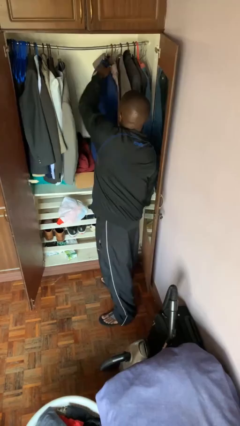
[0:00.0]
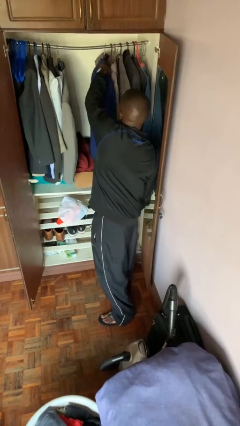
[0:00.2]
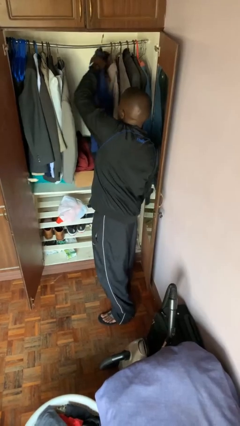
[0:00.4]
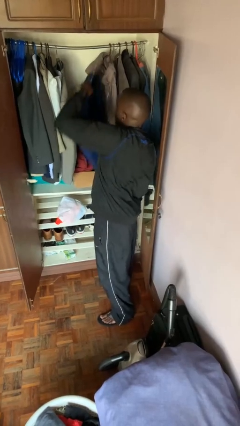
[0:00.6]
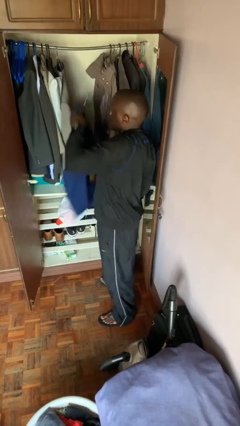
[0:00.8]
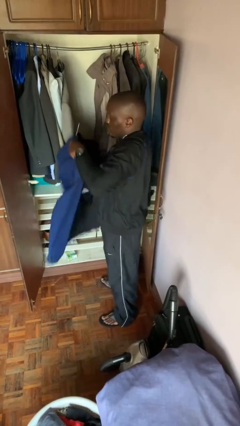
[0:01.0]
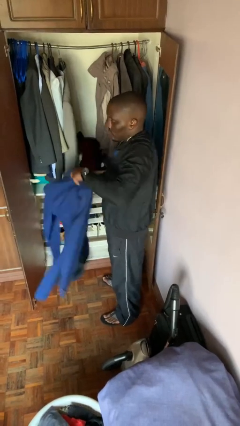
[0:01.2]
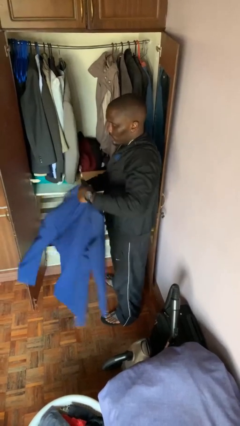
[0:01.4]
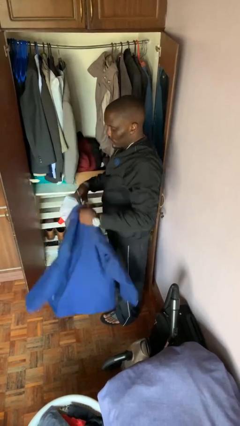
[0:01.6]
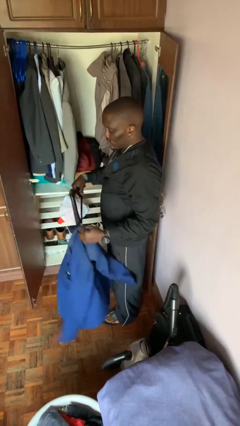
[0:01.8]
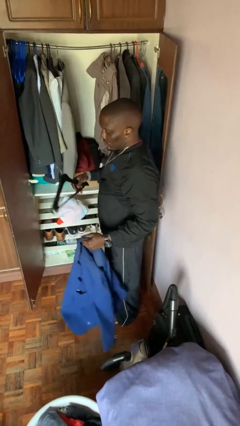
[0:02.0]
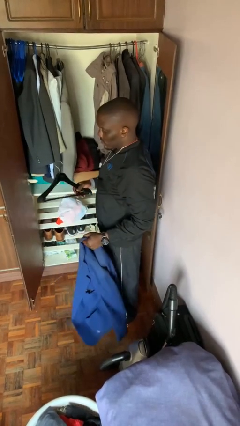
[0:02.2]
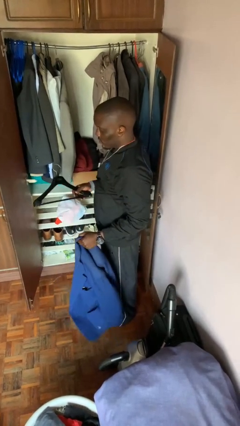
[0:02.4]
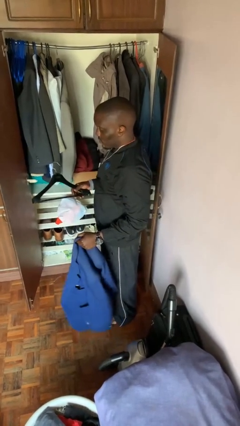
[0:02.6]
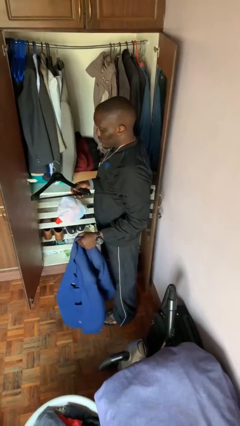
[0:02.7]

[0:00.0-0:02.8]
person takes clothes from closet

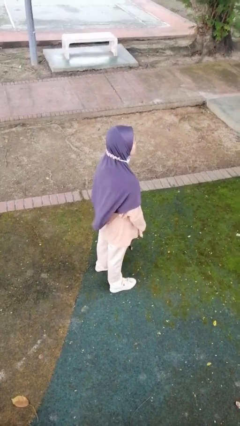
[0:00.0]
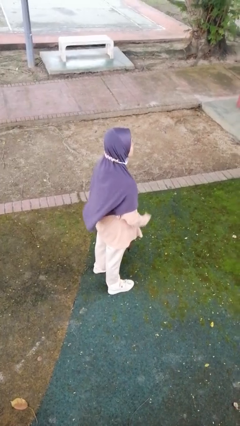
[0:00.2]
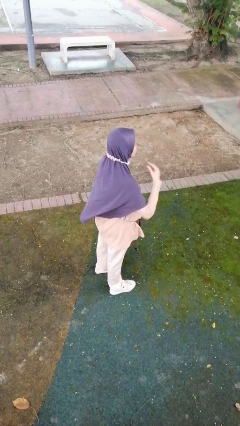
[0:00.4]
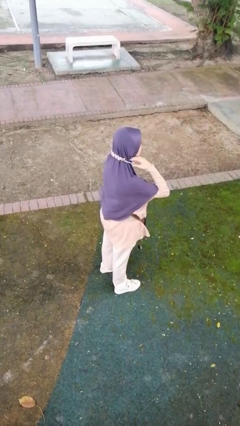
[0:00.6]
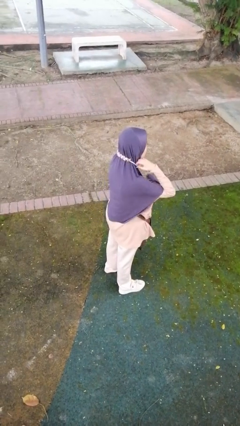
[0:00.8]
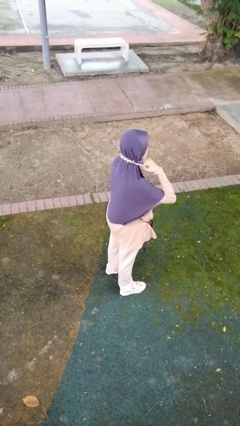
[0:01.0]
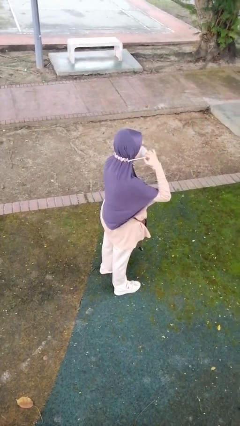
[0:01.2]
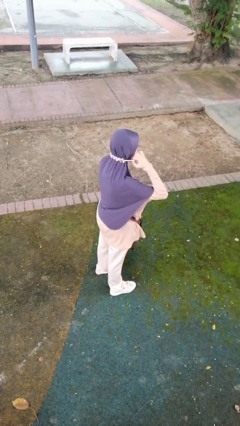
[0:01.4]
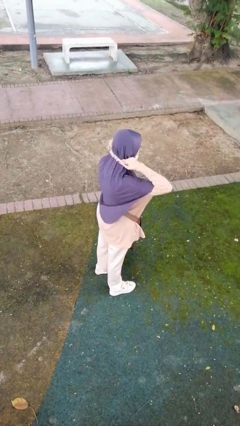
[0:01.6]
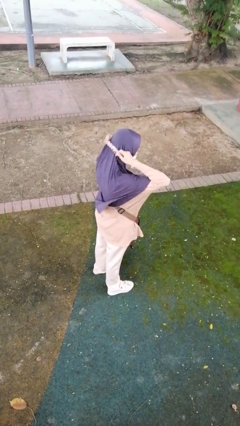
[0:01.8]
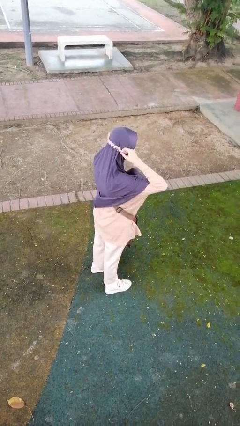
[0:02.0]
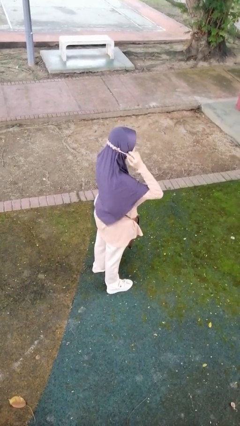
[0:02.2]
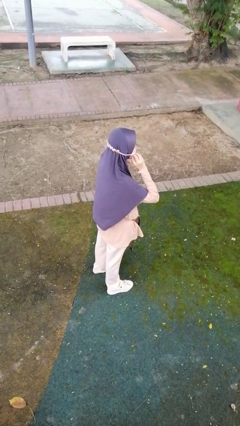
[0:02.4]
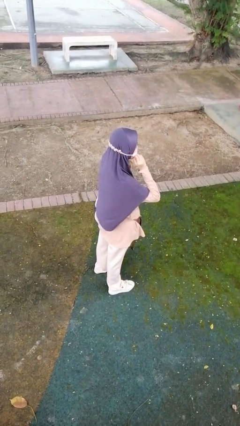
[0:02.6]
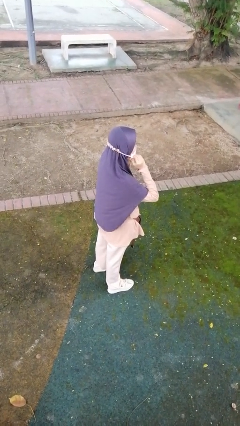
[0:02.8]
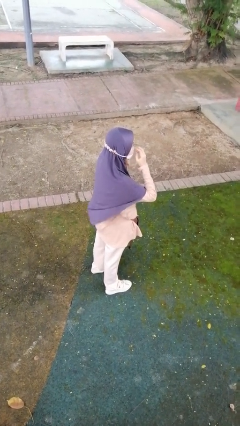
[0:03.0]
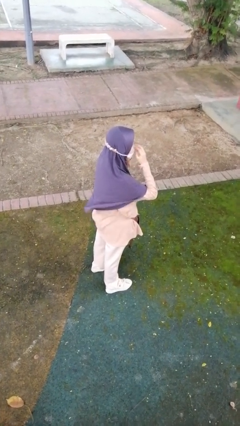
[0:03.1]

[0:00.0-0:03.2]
person puts on facemask

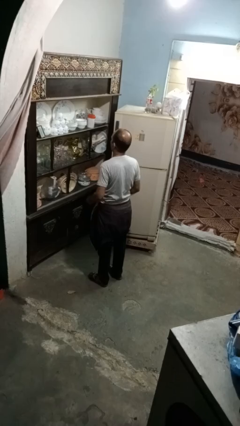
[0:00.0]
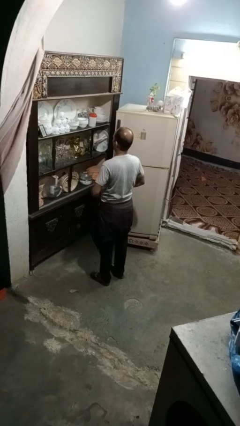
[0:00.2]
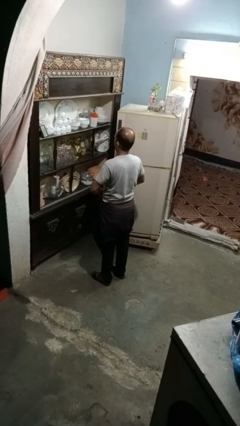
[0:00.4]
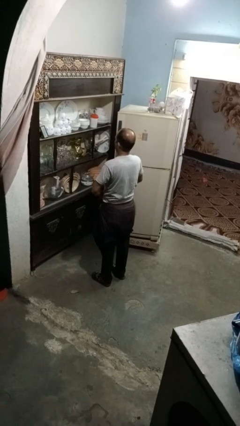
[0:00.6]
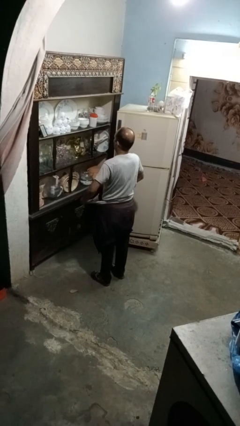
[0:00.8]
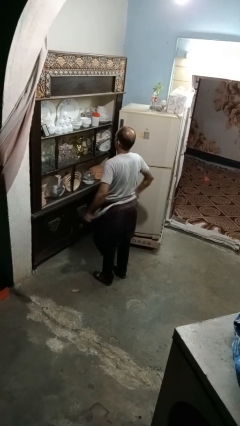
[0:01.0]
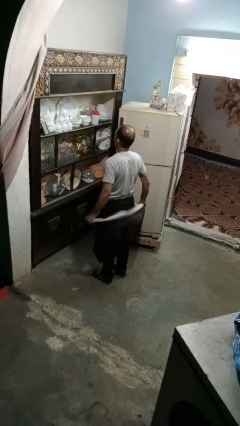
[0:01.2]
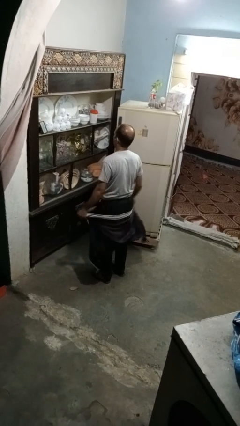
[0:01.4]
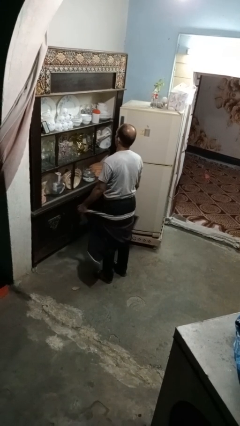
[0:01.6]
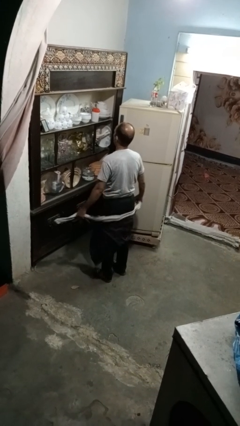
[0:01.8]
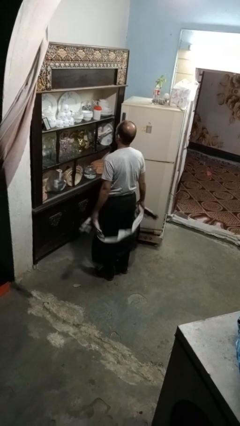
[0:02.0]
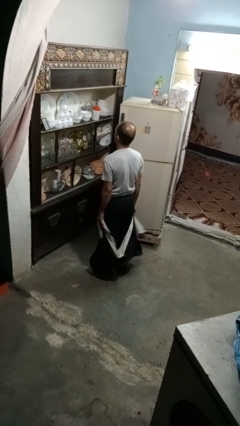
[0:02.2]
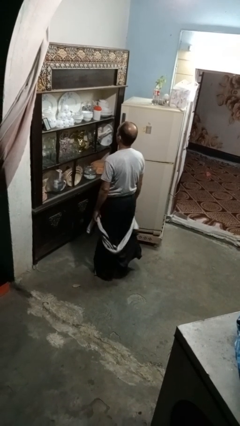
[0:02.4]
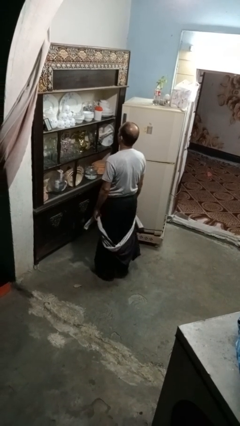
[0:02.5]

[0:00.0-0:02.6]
person unties jacket around waist

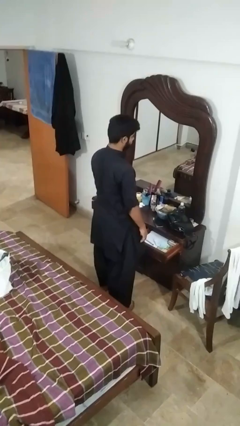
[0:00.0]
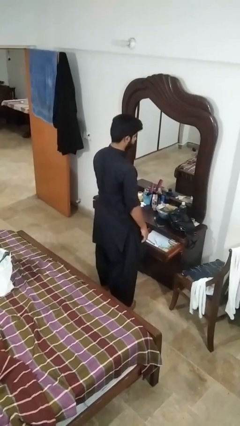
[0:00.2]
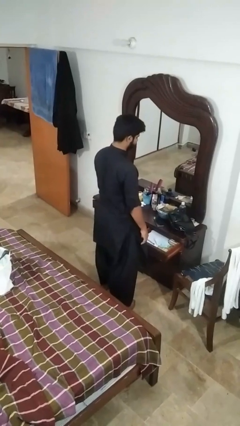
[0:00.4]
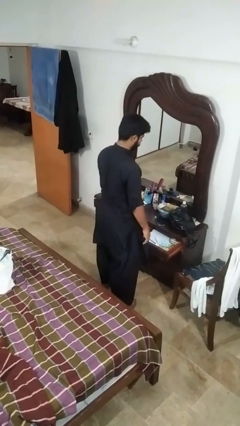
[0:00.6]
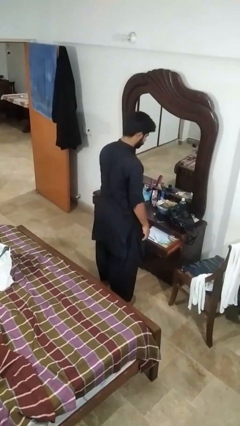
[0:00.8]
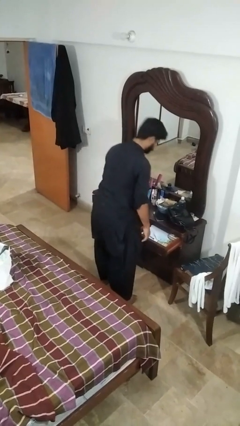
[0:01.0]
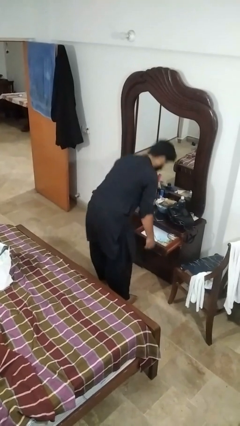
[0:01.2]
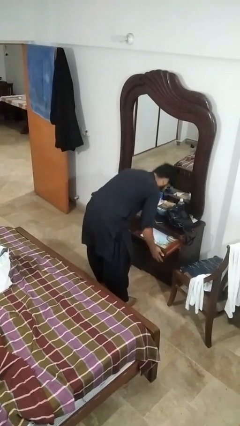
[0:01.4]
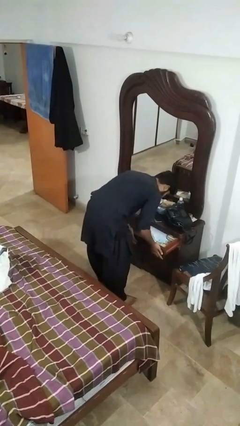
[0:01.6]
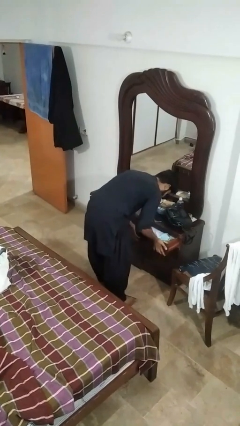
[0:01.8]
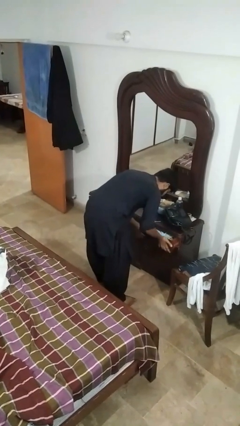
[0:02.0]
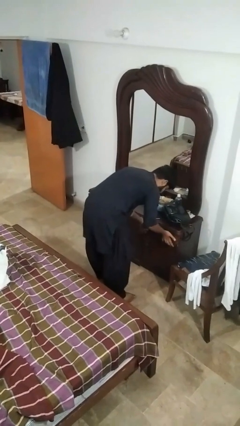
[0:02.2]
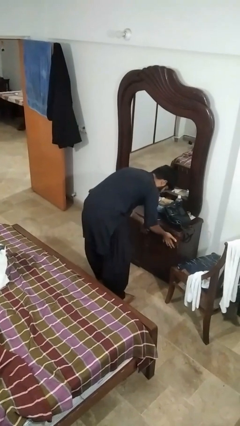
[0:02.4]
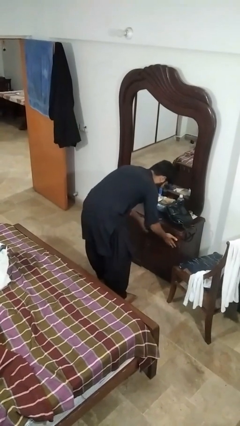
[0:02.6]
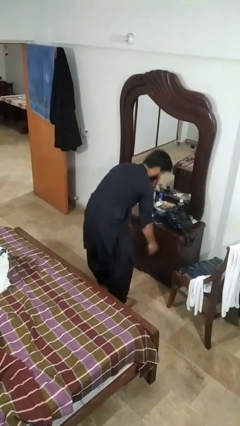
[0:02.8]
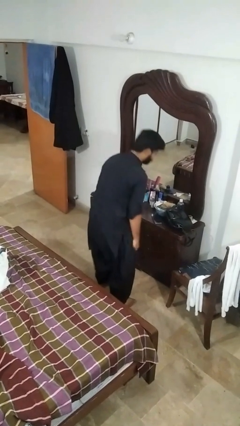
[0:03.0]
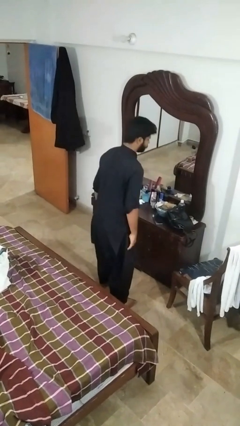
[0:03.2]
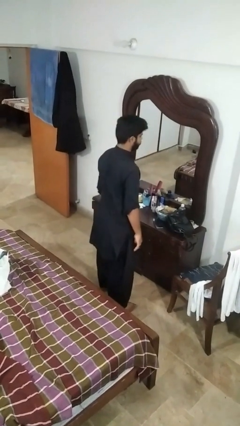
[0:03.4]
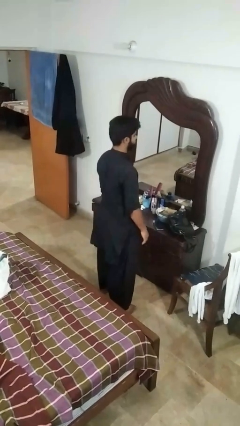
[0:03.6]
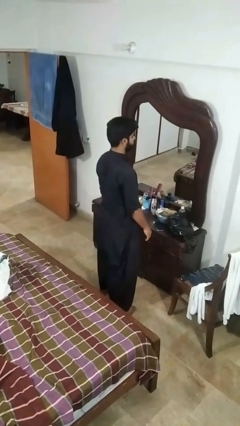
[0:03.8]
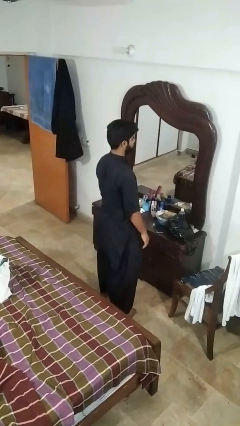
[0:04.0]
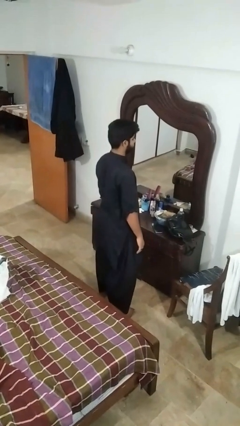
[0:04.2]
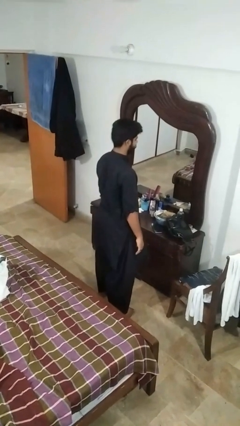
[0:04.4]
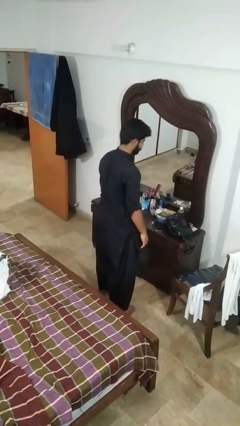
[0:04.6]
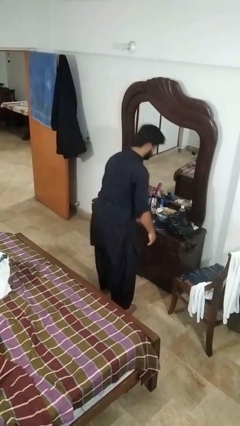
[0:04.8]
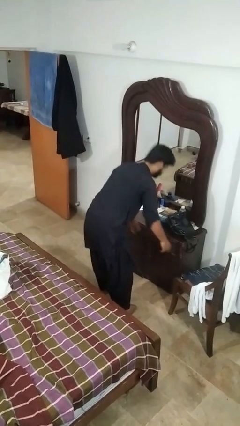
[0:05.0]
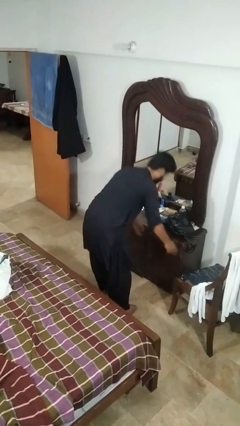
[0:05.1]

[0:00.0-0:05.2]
person closes dresser drawer

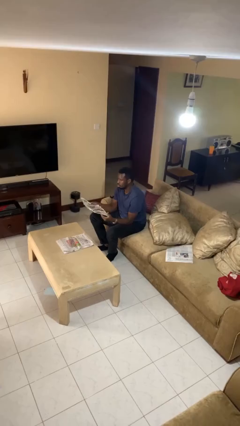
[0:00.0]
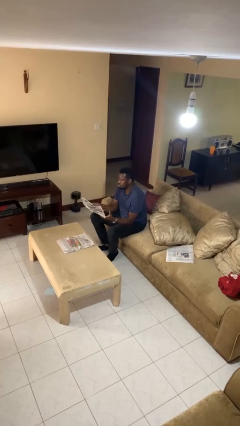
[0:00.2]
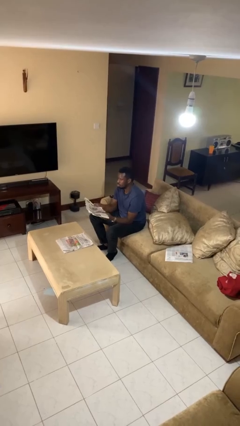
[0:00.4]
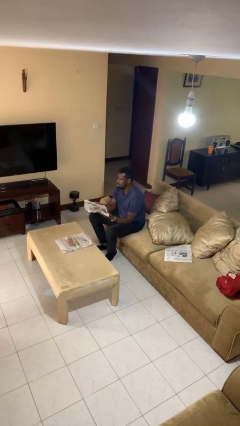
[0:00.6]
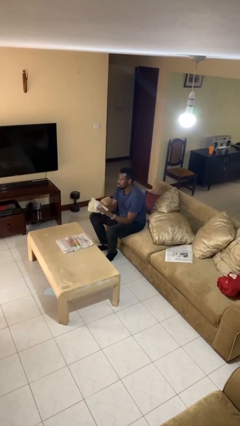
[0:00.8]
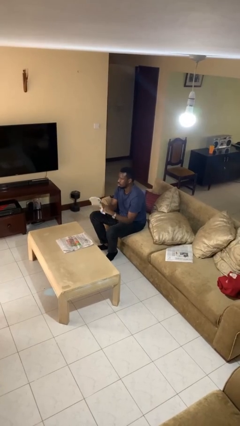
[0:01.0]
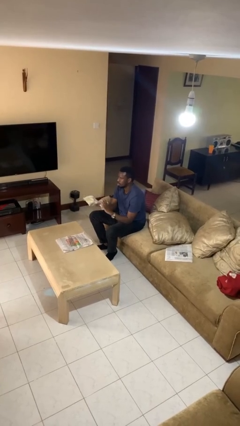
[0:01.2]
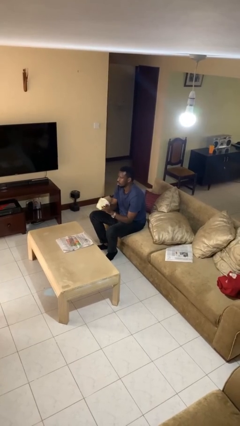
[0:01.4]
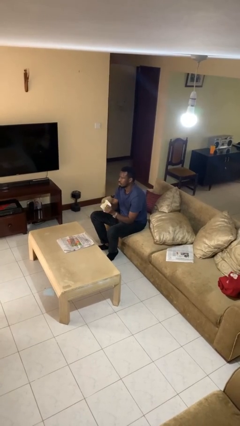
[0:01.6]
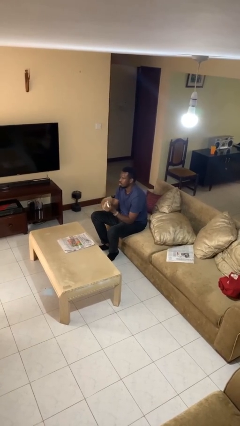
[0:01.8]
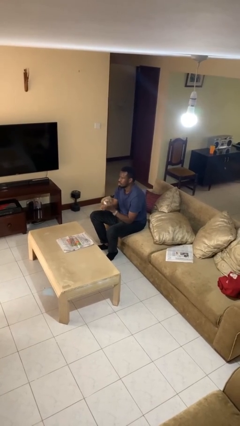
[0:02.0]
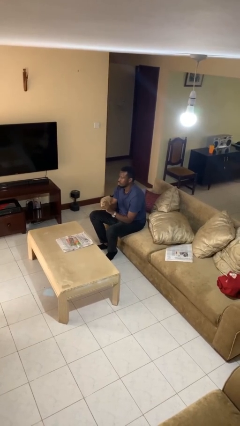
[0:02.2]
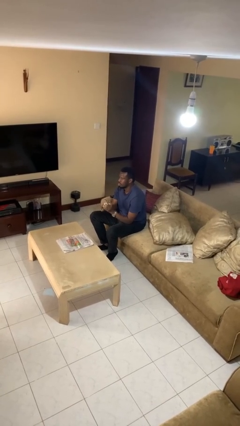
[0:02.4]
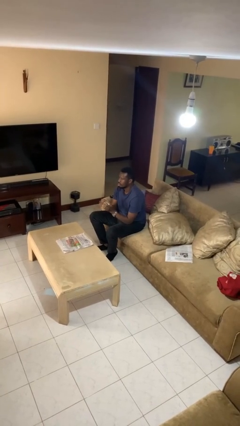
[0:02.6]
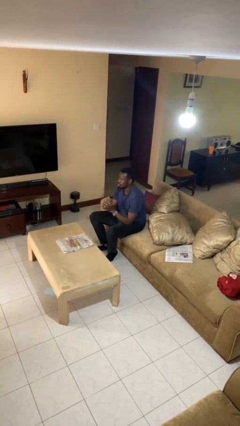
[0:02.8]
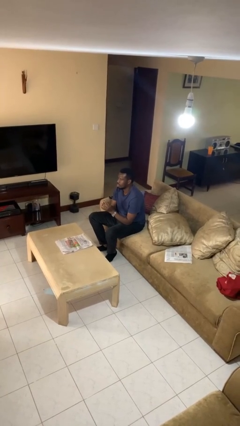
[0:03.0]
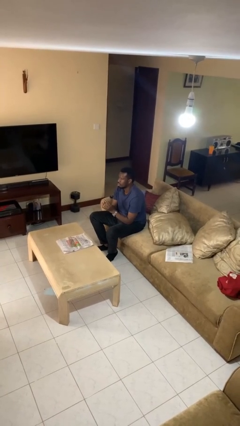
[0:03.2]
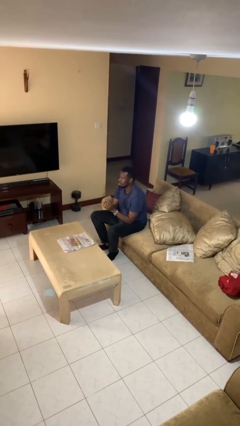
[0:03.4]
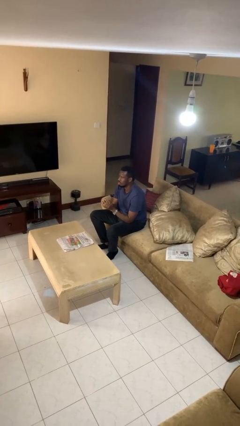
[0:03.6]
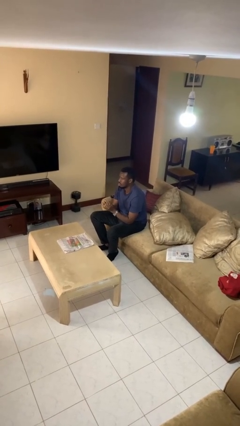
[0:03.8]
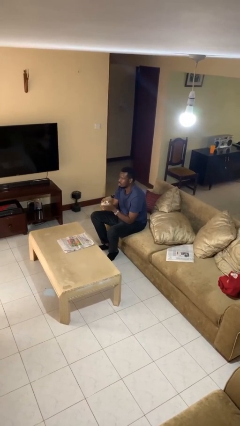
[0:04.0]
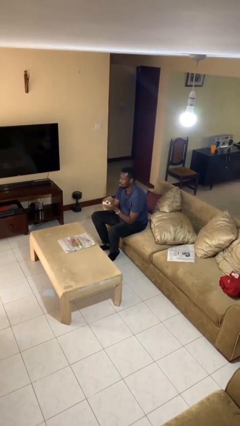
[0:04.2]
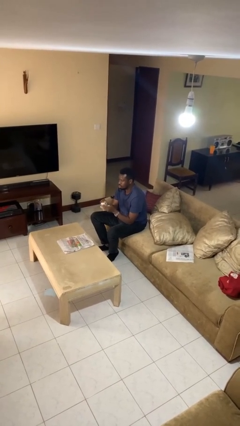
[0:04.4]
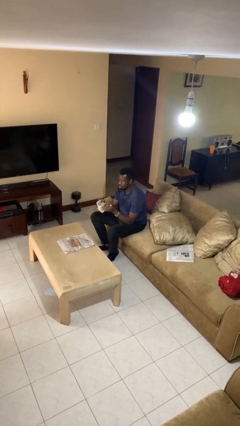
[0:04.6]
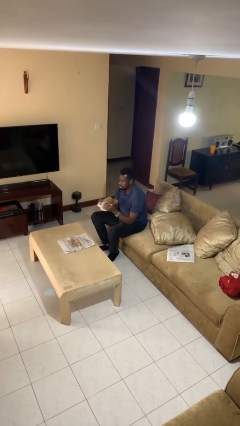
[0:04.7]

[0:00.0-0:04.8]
person crumples paper
